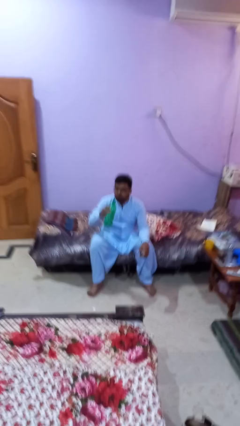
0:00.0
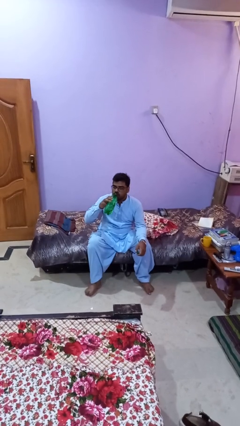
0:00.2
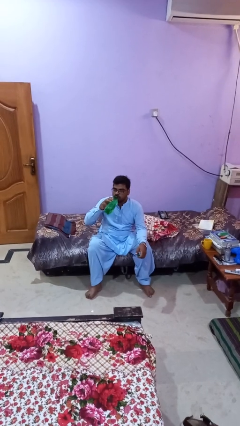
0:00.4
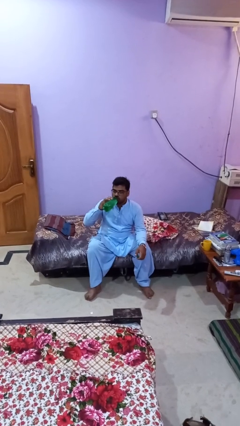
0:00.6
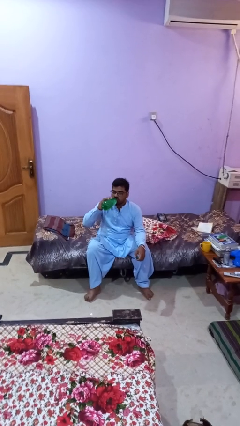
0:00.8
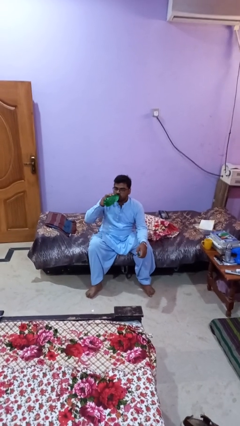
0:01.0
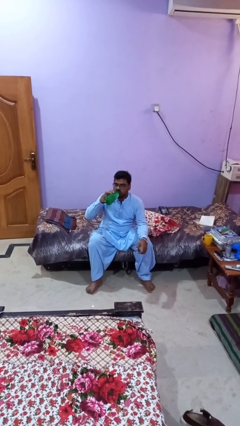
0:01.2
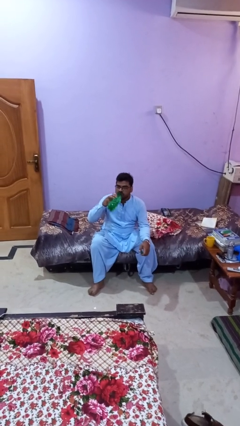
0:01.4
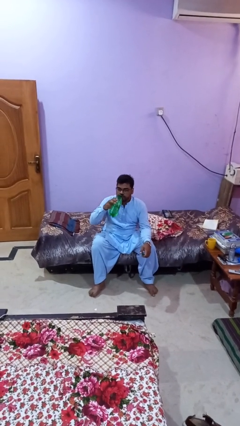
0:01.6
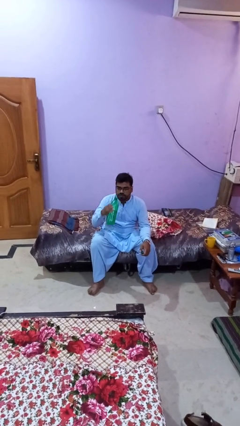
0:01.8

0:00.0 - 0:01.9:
person drinks from bottle

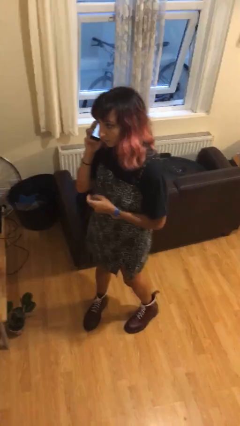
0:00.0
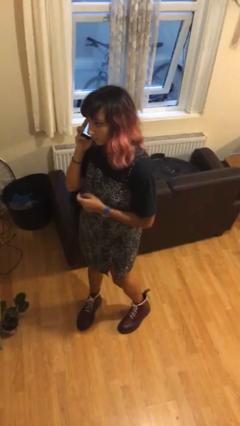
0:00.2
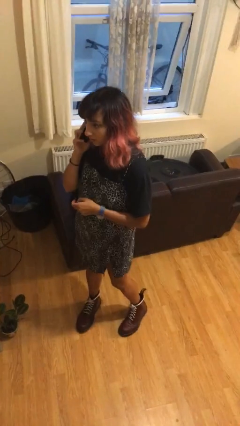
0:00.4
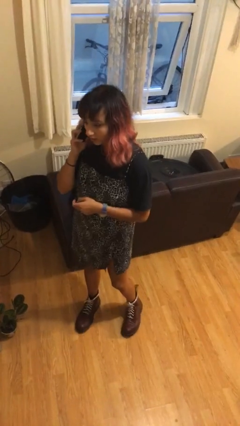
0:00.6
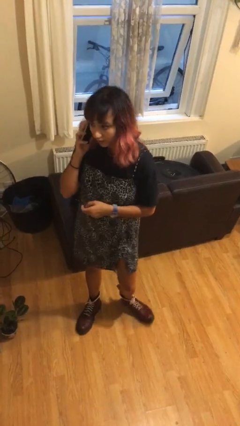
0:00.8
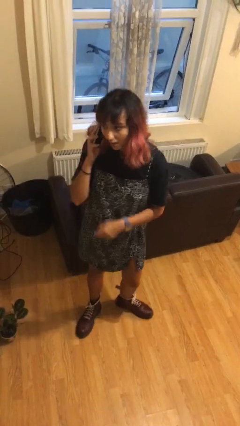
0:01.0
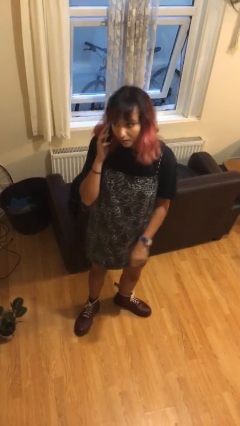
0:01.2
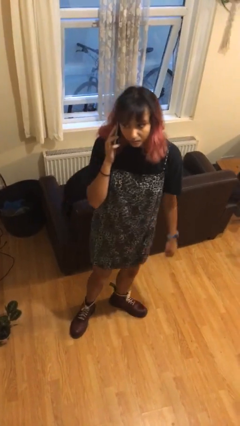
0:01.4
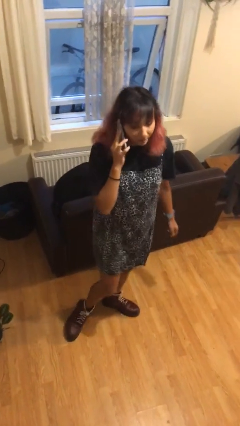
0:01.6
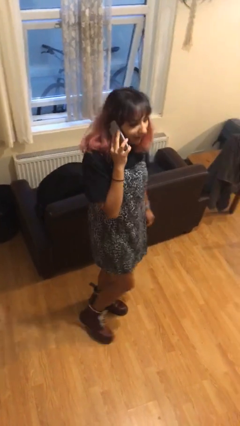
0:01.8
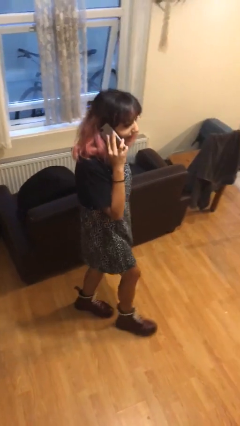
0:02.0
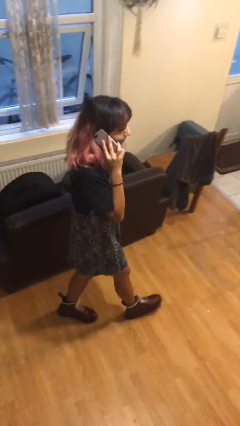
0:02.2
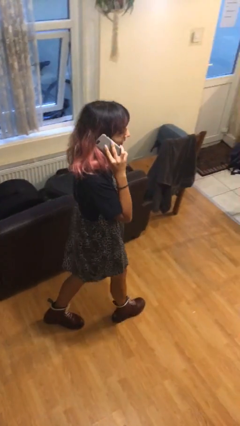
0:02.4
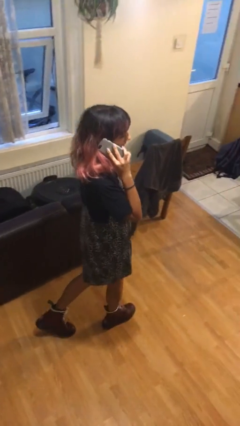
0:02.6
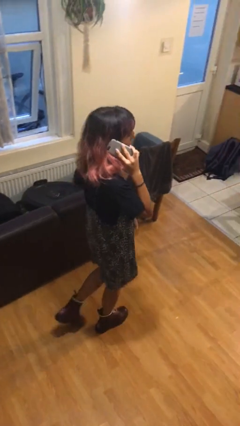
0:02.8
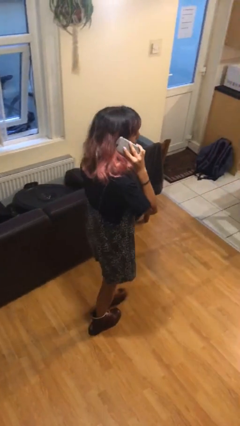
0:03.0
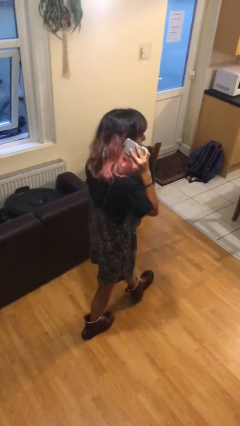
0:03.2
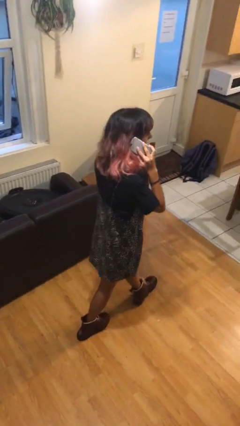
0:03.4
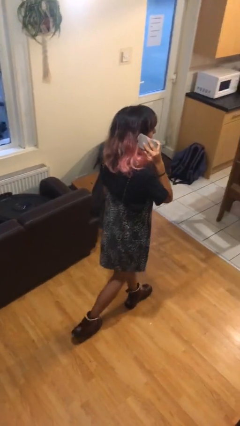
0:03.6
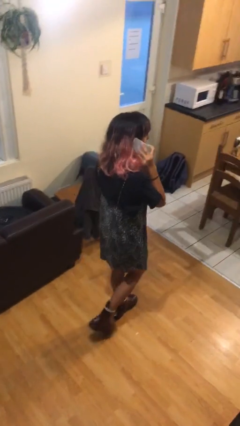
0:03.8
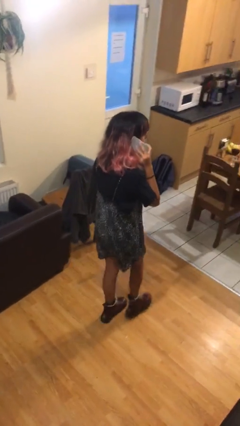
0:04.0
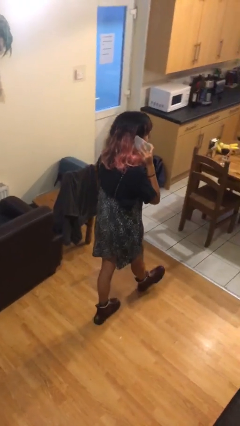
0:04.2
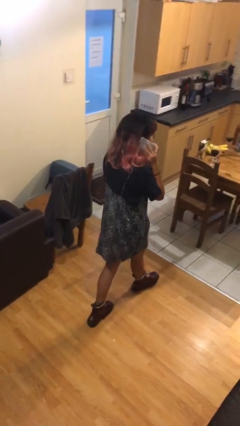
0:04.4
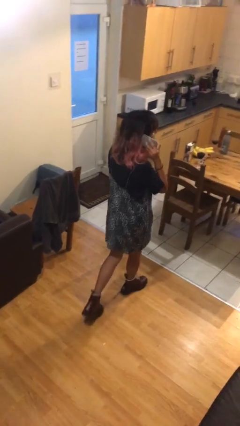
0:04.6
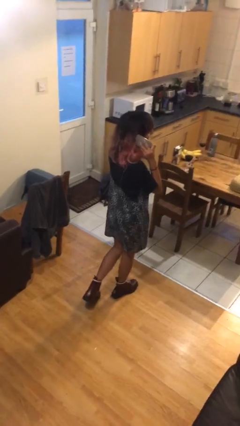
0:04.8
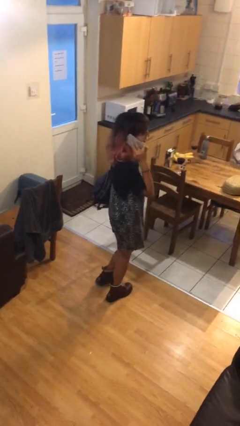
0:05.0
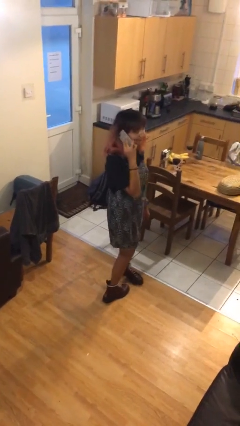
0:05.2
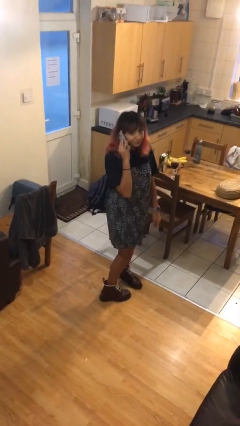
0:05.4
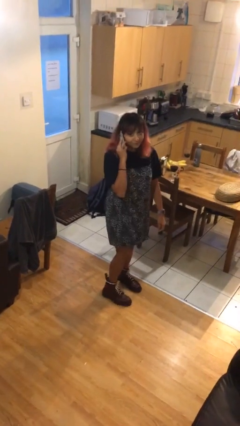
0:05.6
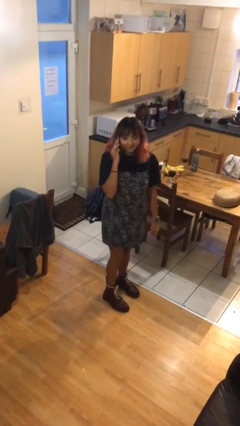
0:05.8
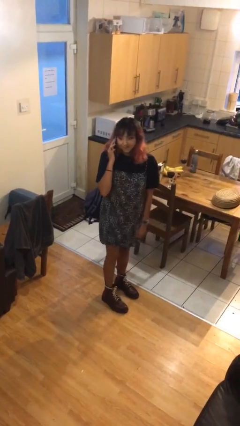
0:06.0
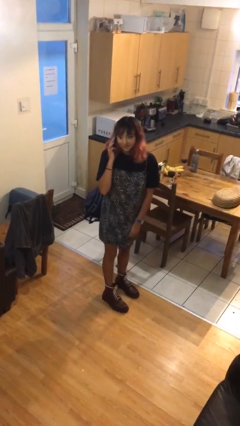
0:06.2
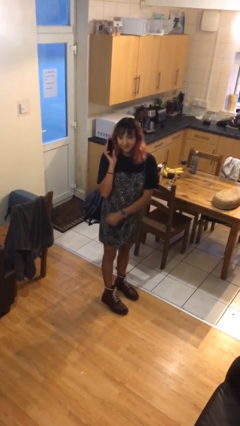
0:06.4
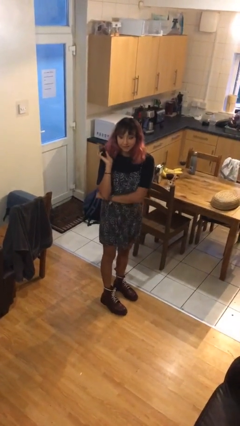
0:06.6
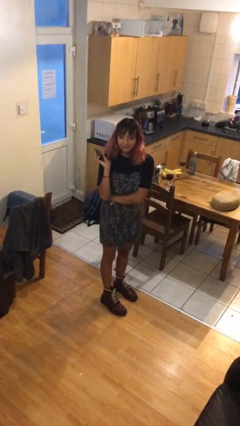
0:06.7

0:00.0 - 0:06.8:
person talks on phone

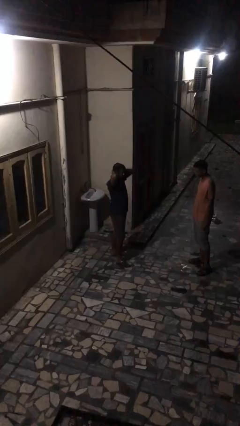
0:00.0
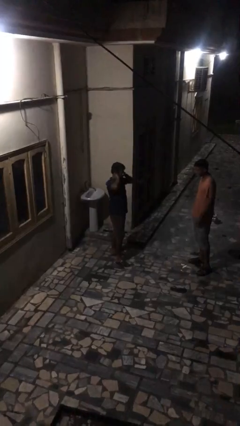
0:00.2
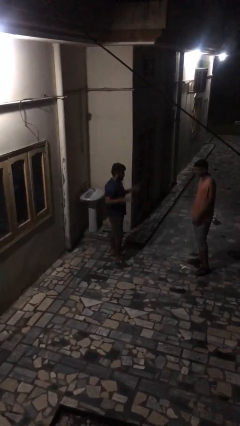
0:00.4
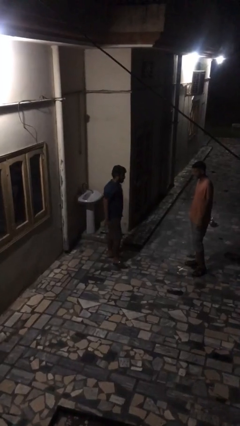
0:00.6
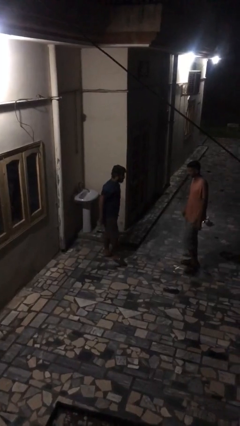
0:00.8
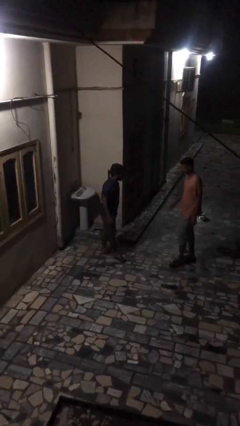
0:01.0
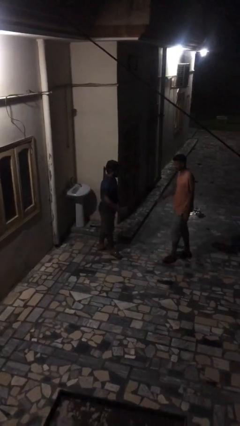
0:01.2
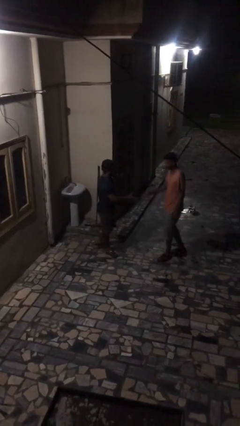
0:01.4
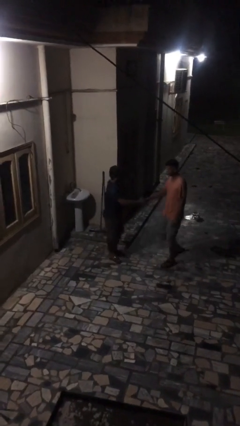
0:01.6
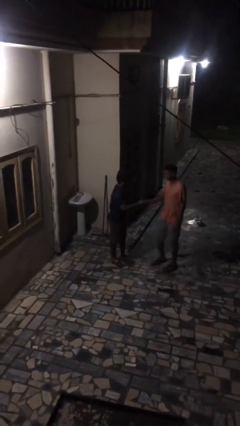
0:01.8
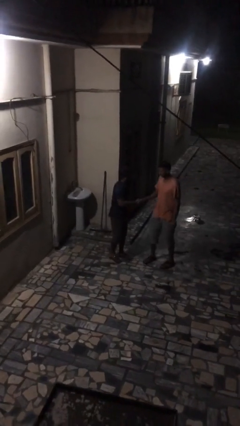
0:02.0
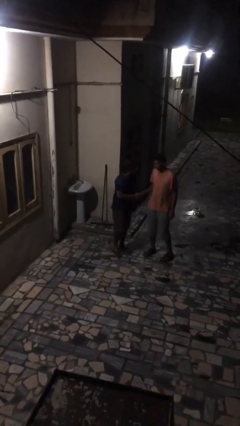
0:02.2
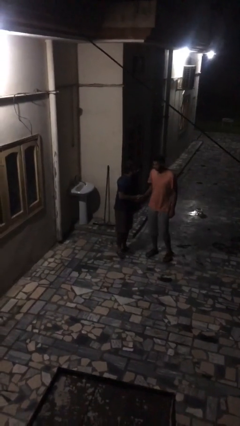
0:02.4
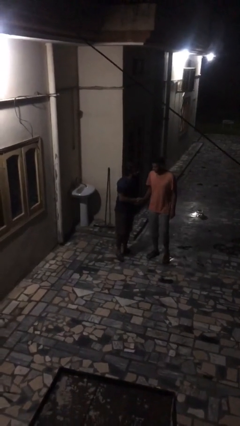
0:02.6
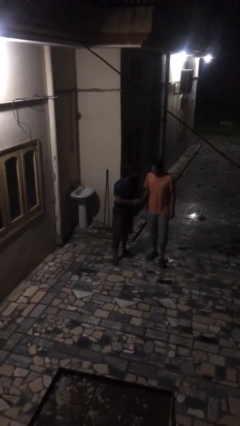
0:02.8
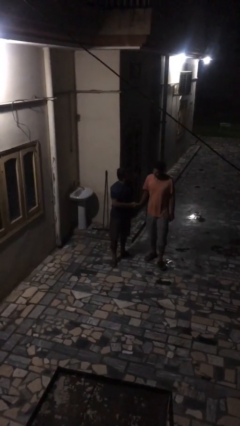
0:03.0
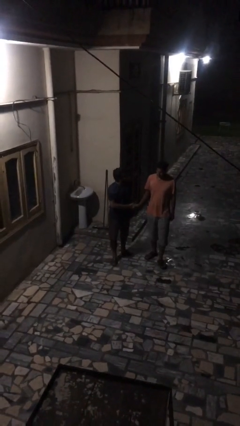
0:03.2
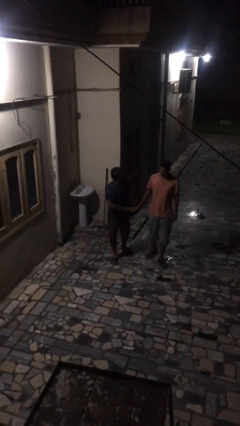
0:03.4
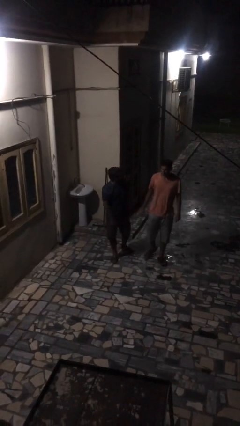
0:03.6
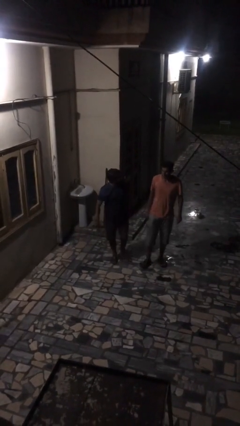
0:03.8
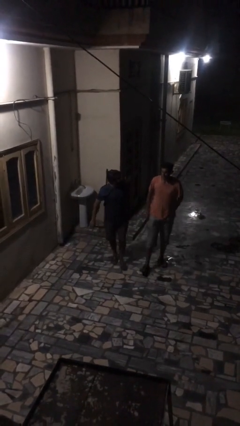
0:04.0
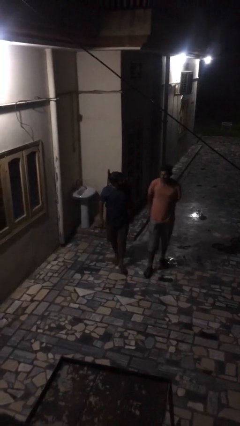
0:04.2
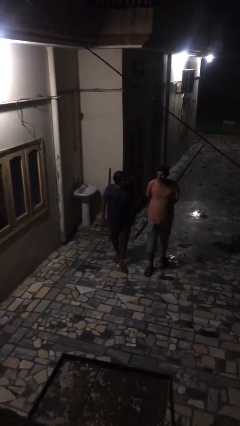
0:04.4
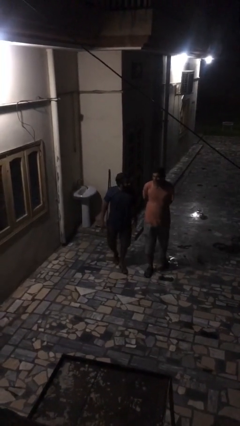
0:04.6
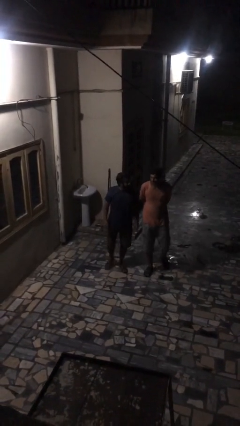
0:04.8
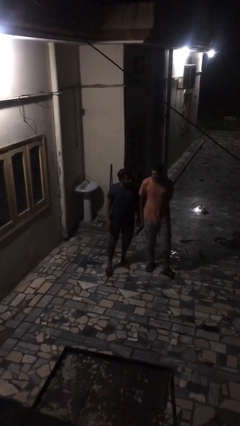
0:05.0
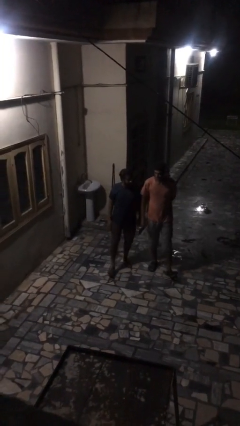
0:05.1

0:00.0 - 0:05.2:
person shakes hand

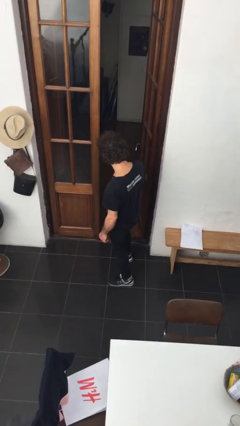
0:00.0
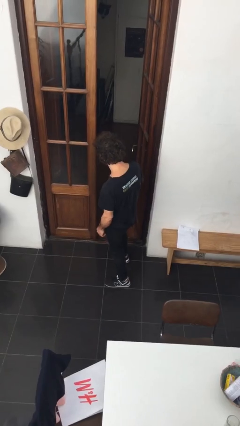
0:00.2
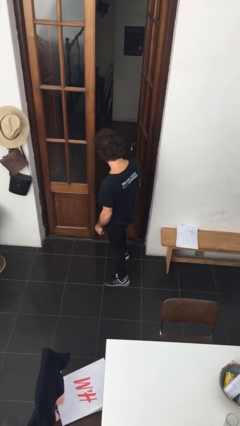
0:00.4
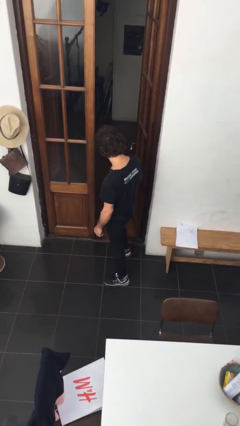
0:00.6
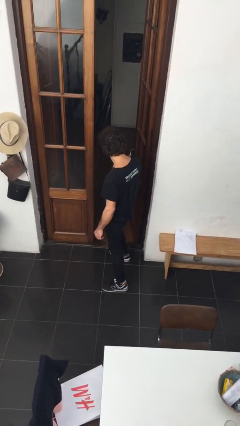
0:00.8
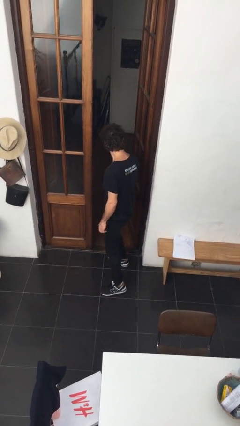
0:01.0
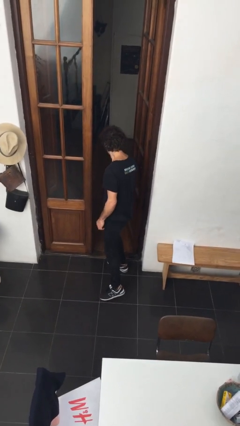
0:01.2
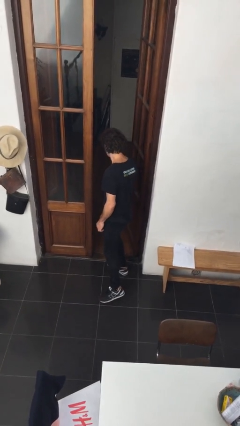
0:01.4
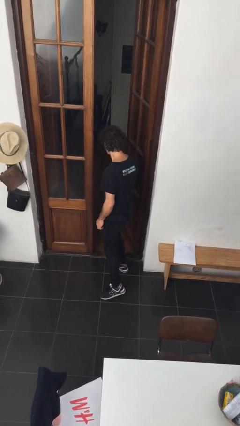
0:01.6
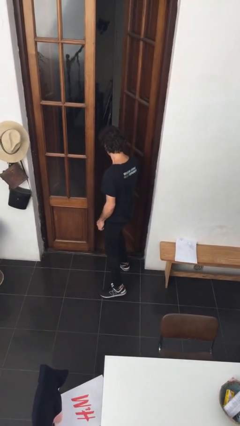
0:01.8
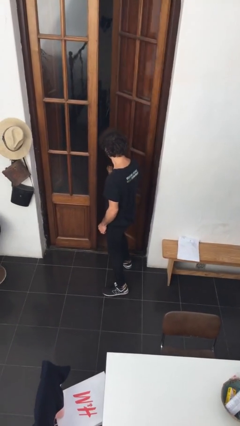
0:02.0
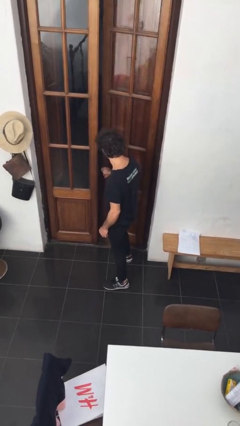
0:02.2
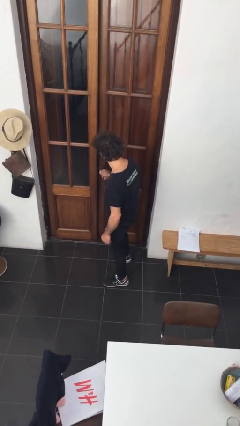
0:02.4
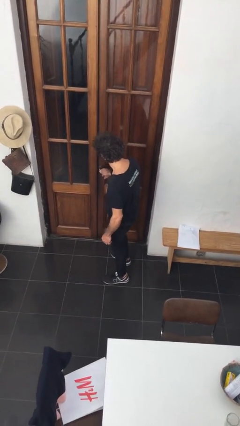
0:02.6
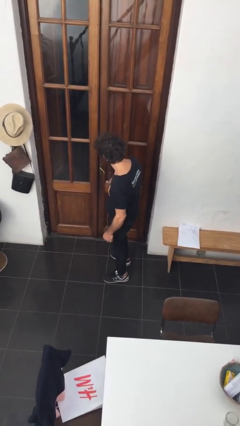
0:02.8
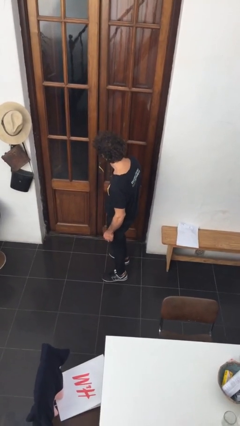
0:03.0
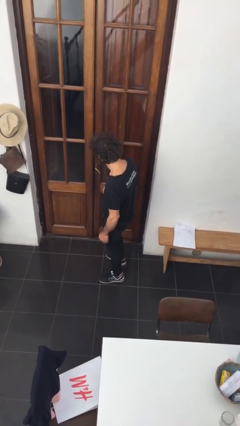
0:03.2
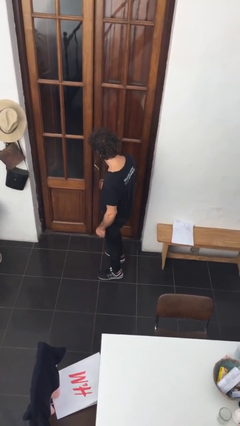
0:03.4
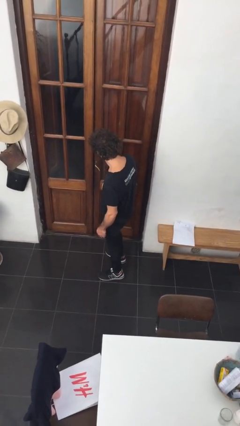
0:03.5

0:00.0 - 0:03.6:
person closes facility door

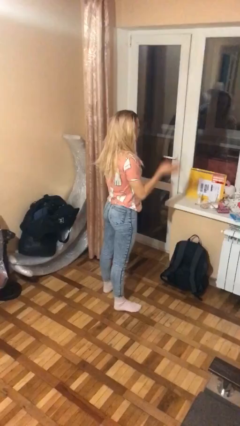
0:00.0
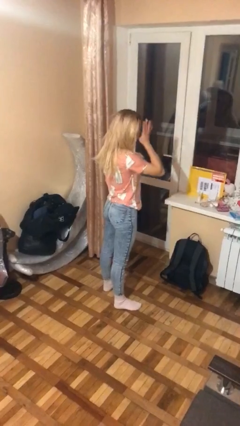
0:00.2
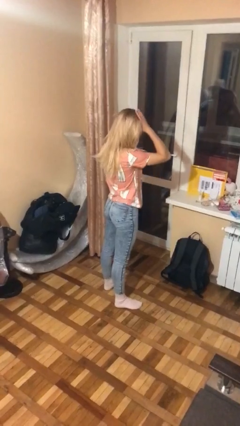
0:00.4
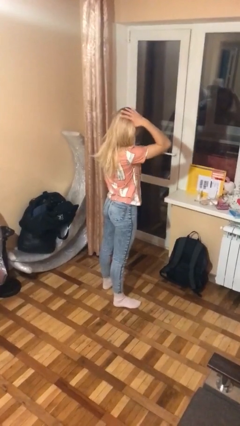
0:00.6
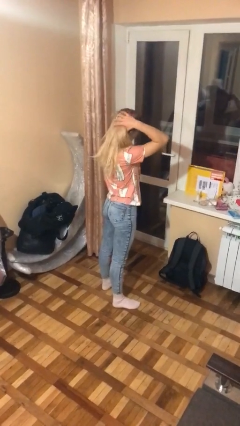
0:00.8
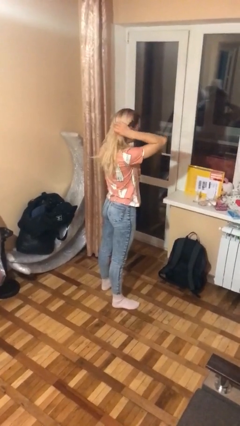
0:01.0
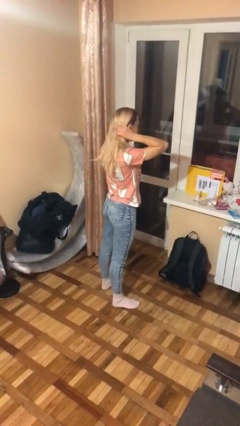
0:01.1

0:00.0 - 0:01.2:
person strokes hair
